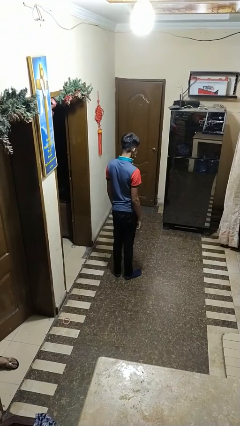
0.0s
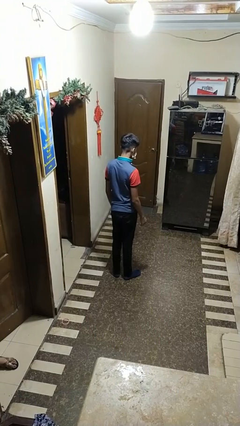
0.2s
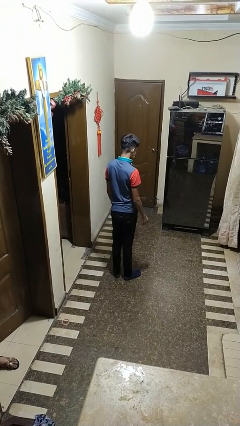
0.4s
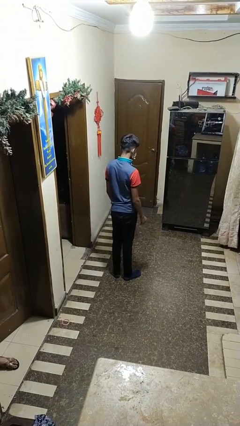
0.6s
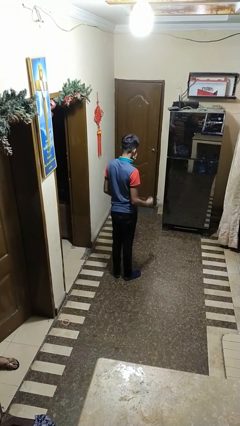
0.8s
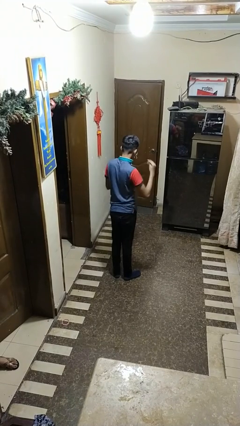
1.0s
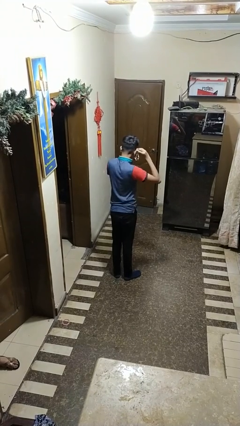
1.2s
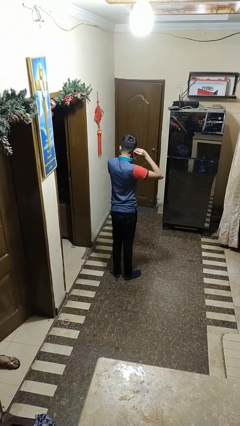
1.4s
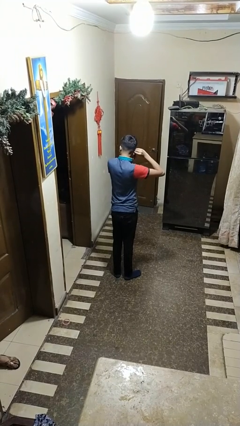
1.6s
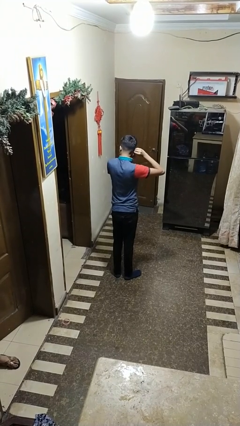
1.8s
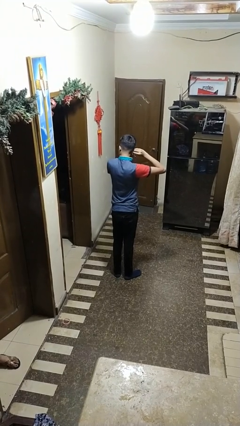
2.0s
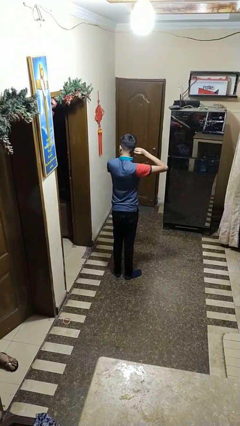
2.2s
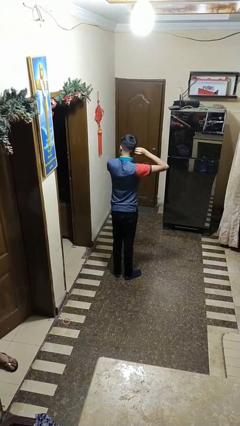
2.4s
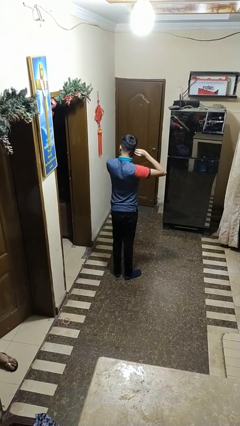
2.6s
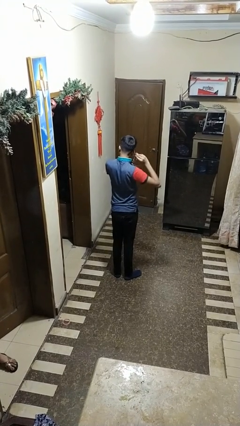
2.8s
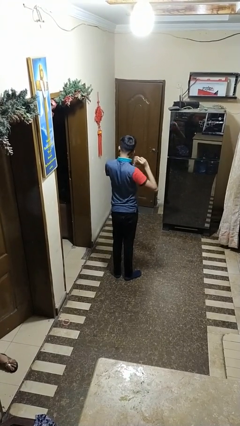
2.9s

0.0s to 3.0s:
person takes off earrings

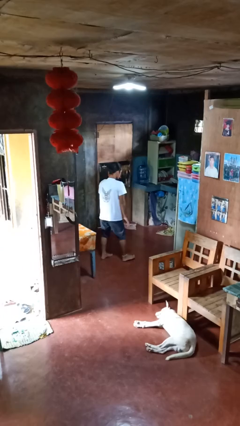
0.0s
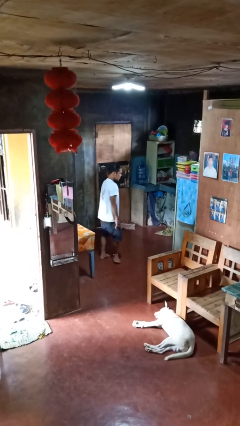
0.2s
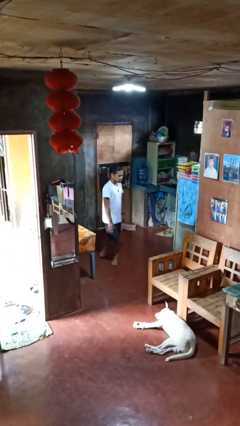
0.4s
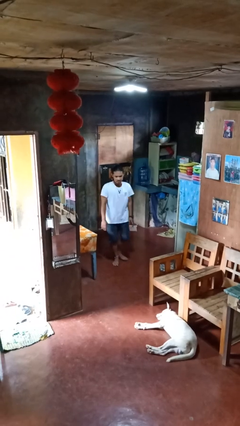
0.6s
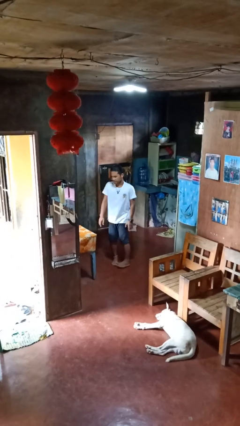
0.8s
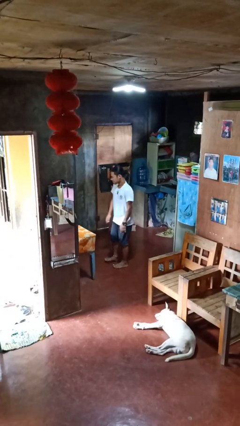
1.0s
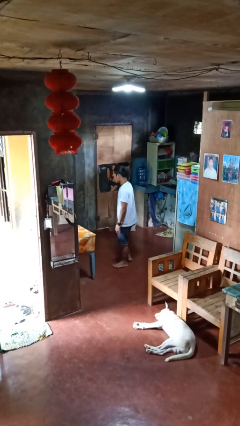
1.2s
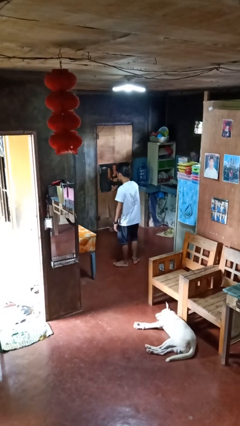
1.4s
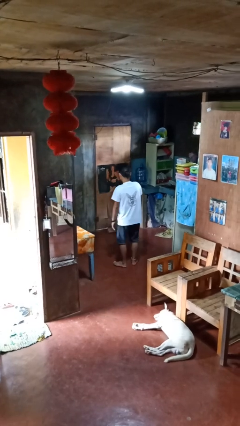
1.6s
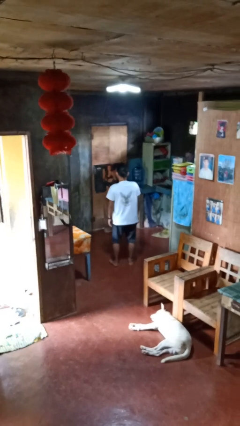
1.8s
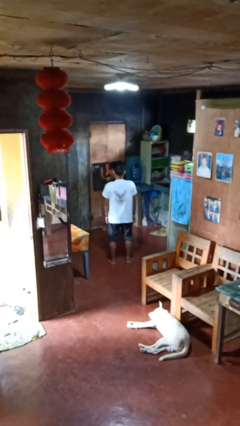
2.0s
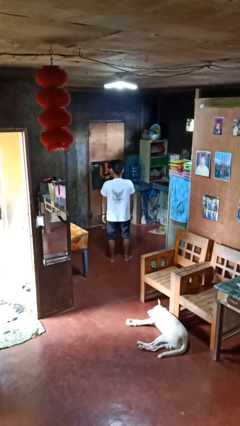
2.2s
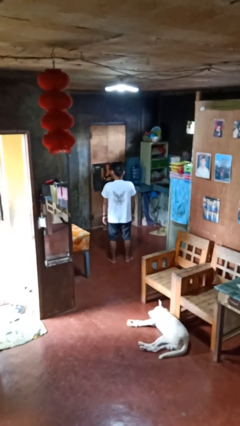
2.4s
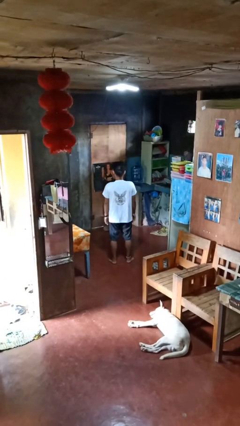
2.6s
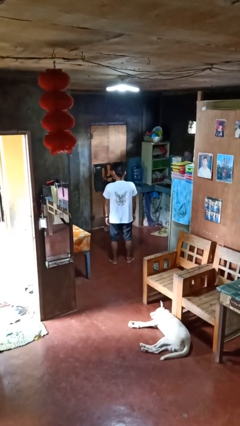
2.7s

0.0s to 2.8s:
person twirls

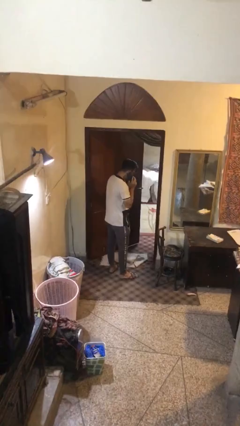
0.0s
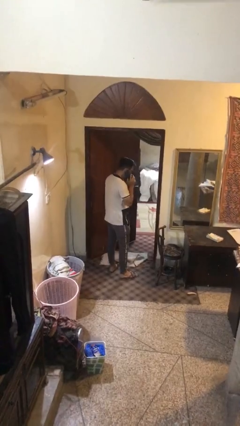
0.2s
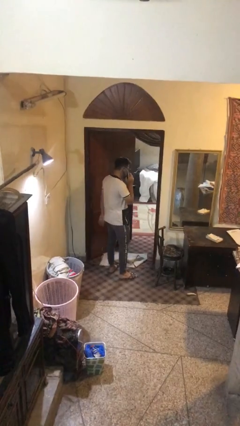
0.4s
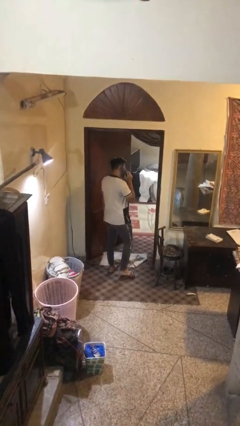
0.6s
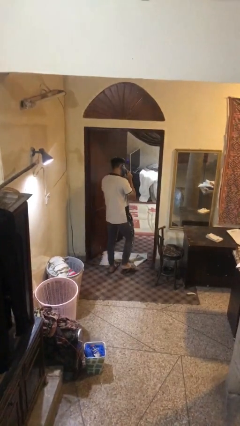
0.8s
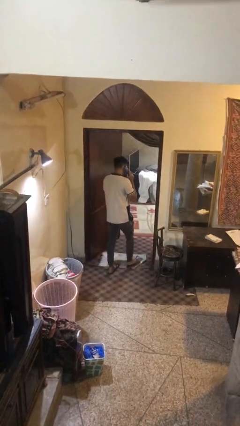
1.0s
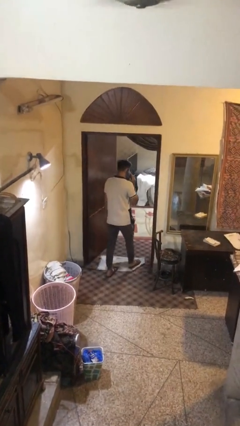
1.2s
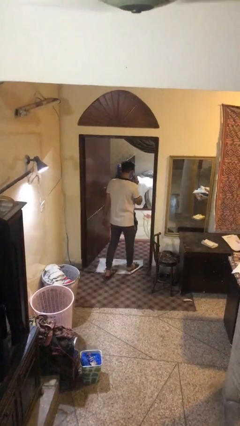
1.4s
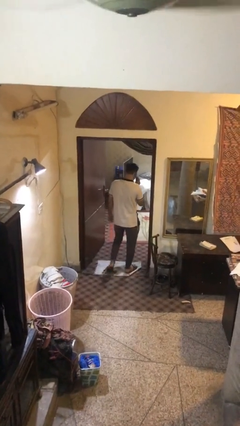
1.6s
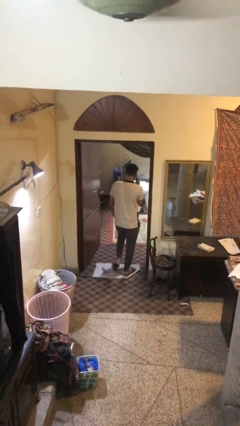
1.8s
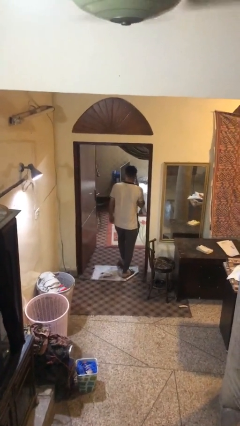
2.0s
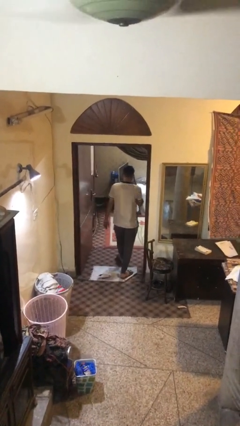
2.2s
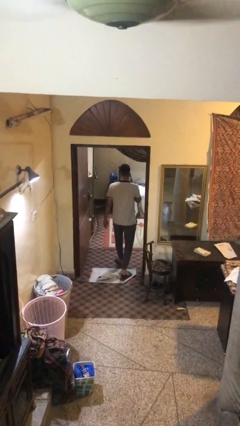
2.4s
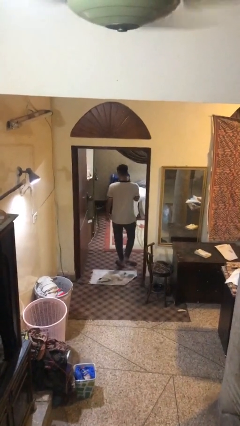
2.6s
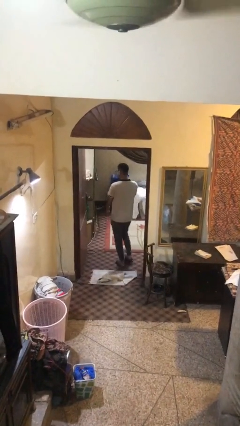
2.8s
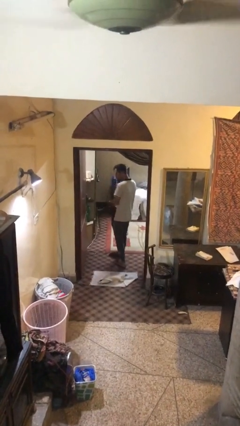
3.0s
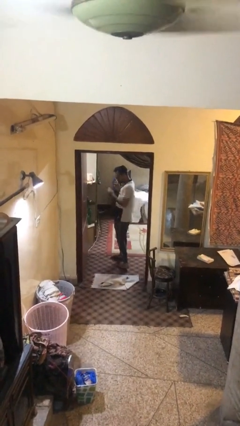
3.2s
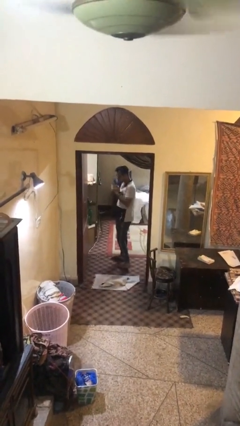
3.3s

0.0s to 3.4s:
person exits scene through structure

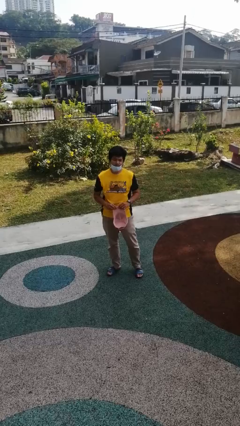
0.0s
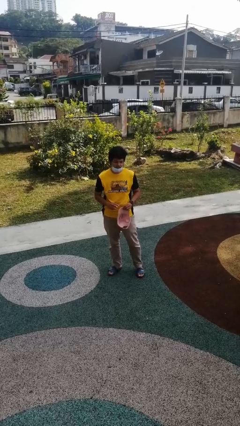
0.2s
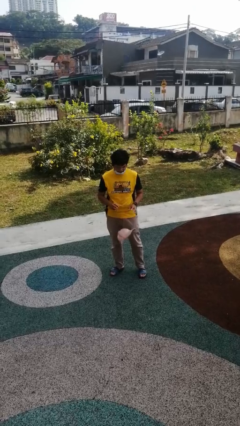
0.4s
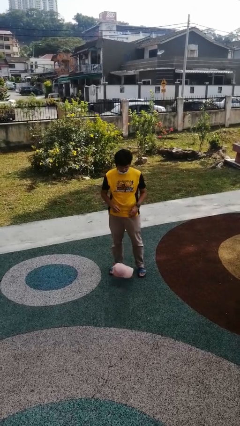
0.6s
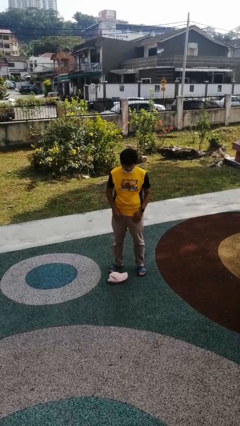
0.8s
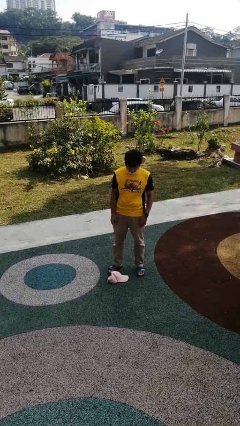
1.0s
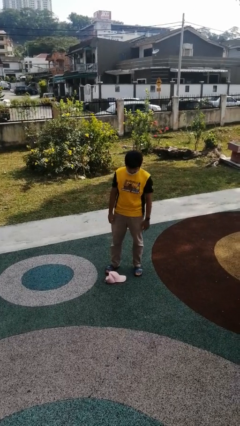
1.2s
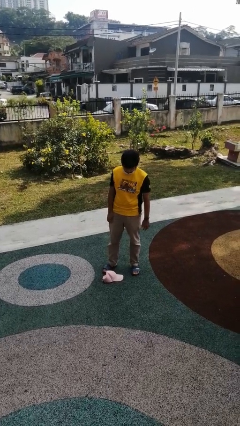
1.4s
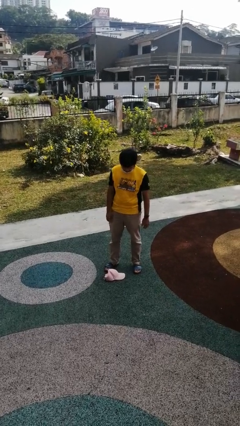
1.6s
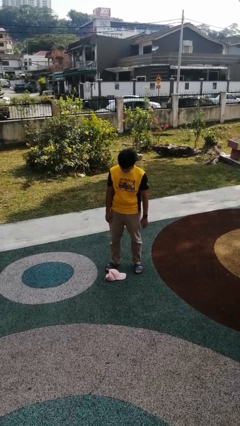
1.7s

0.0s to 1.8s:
person drops object

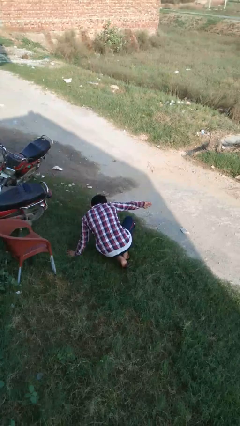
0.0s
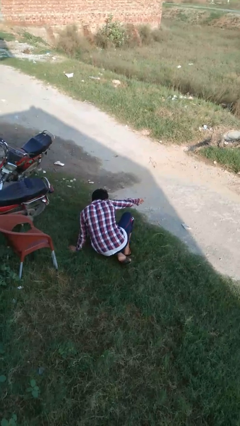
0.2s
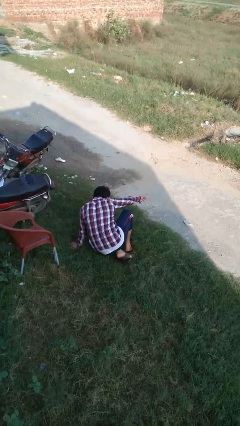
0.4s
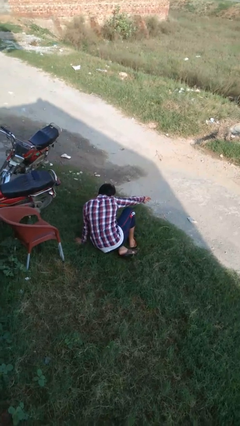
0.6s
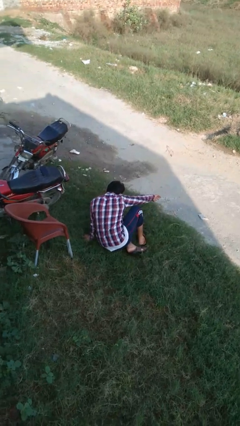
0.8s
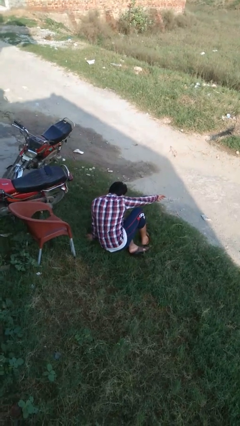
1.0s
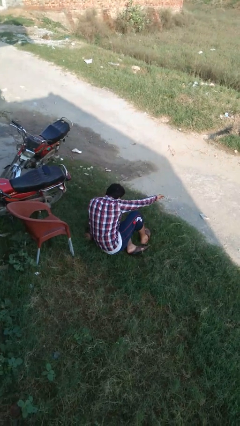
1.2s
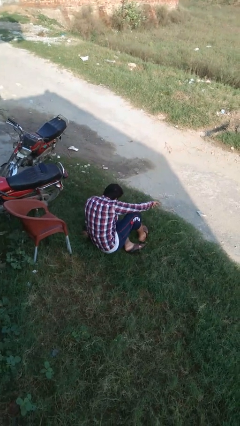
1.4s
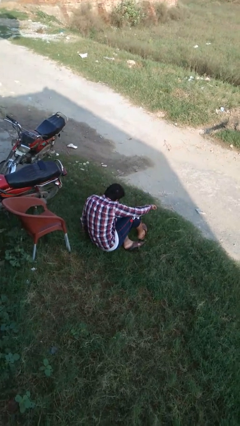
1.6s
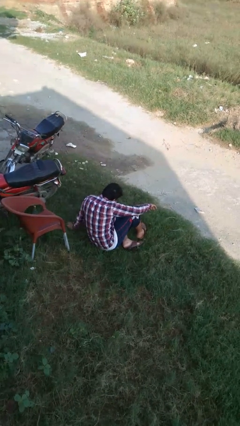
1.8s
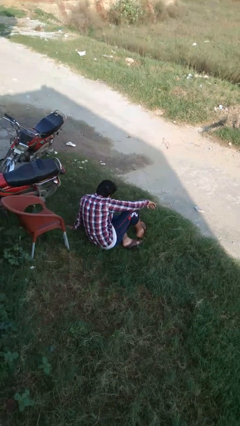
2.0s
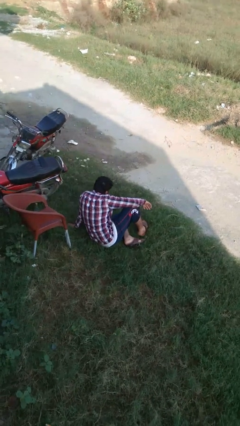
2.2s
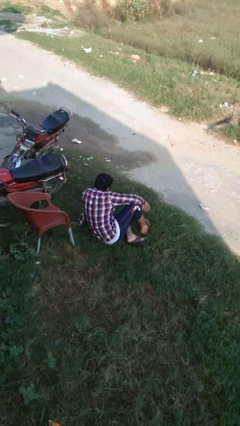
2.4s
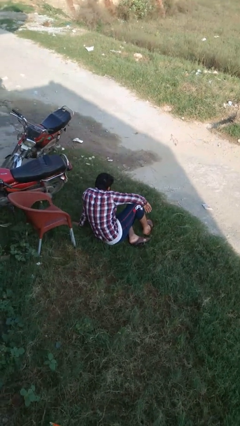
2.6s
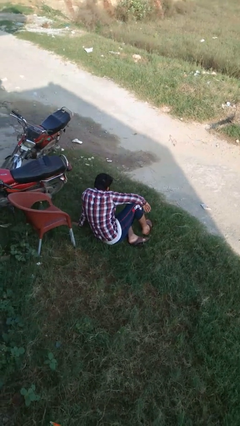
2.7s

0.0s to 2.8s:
person lies down on floor

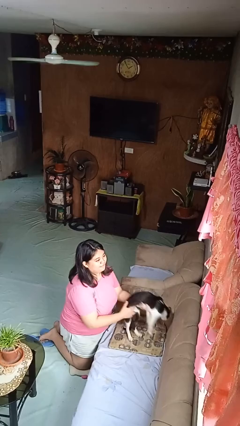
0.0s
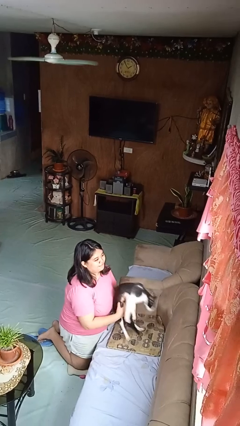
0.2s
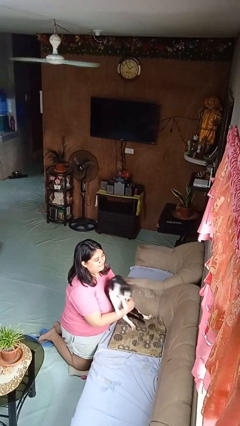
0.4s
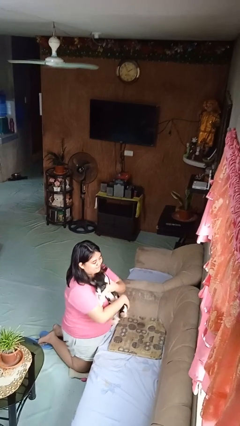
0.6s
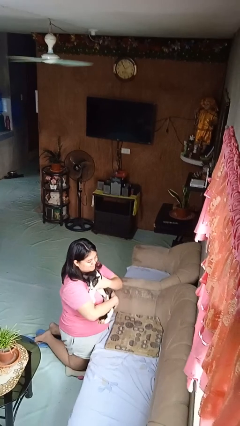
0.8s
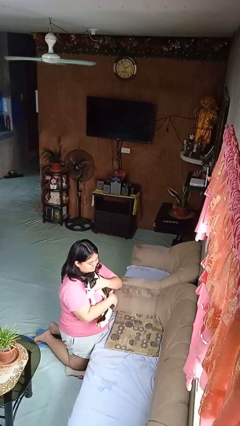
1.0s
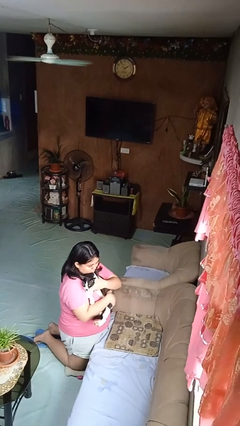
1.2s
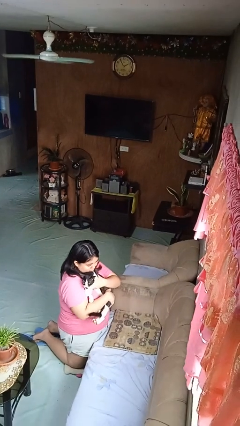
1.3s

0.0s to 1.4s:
person hugs cat

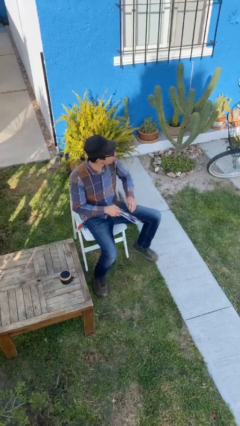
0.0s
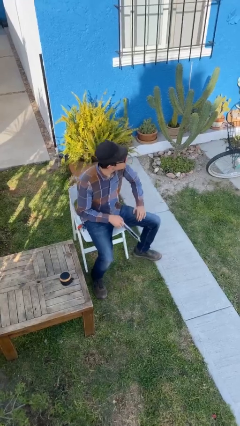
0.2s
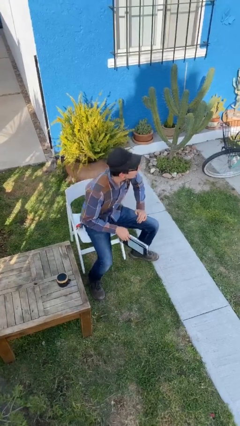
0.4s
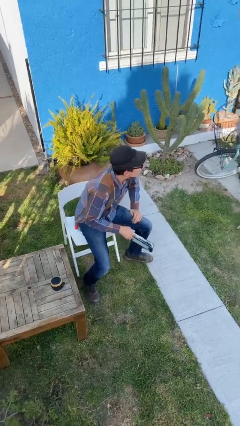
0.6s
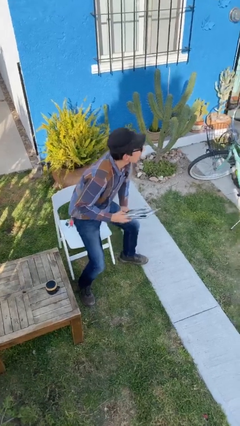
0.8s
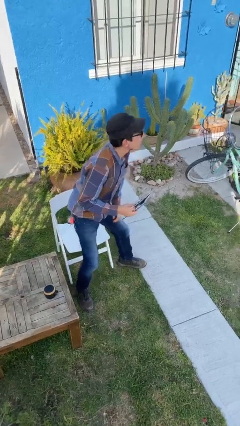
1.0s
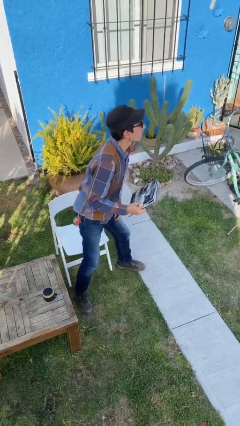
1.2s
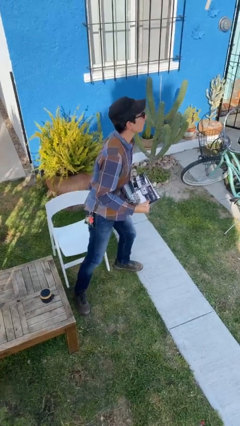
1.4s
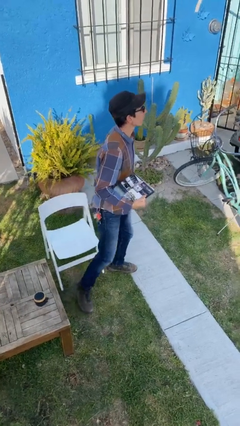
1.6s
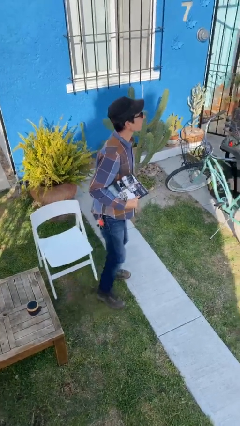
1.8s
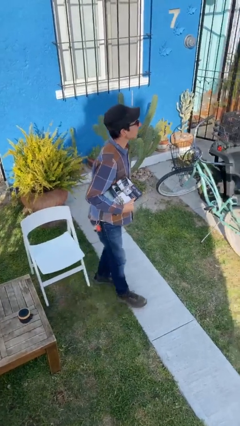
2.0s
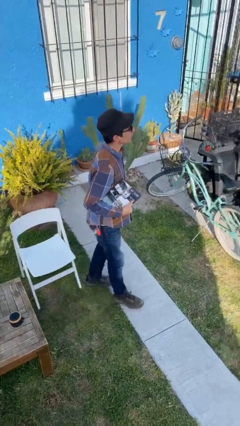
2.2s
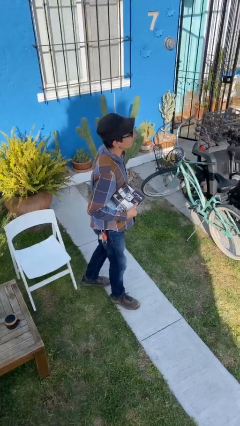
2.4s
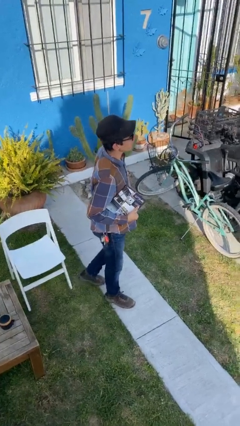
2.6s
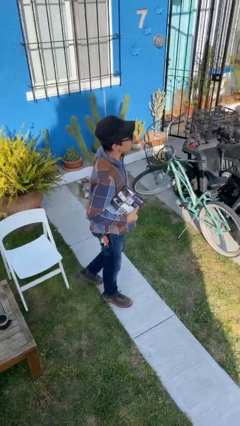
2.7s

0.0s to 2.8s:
person stands up
